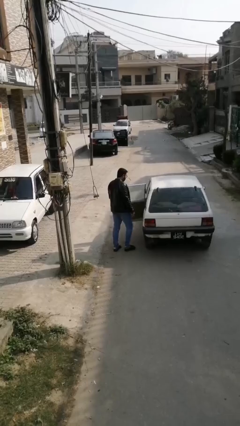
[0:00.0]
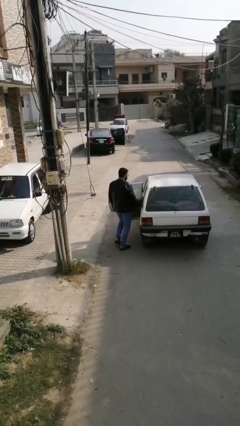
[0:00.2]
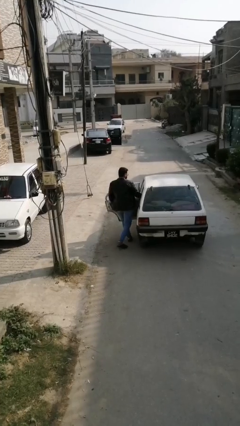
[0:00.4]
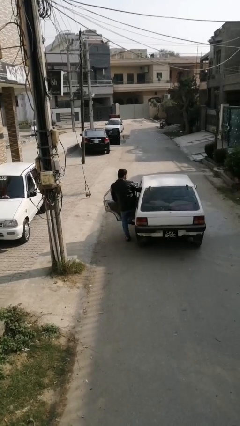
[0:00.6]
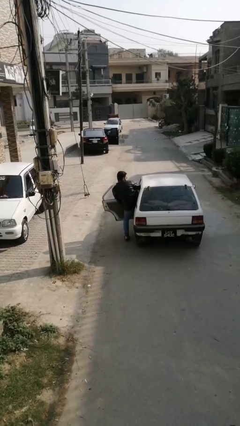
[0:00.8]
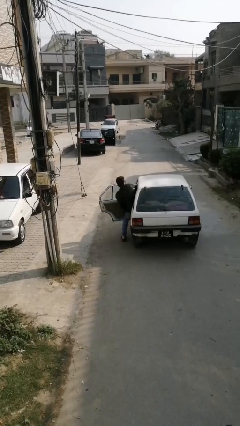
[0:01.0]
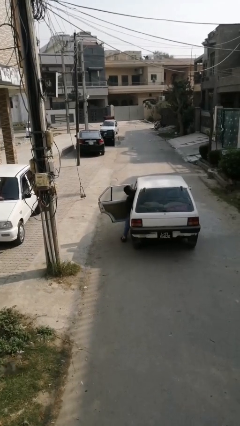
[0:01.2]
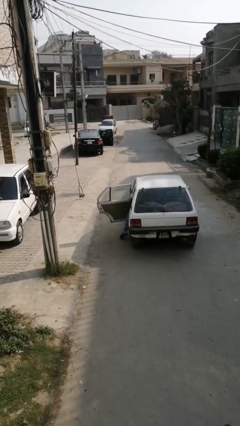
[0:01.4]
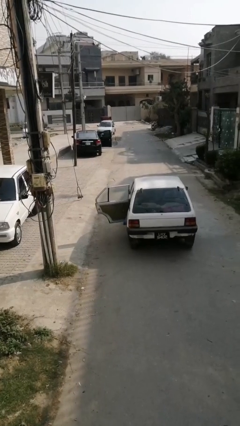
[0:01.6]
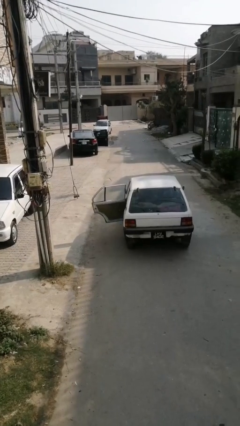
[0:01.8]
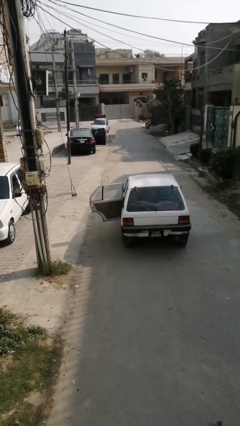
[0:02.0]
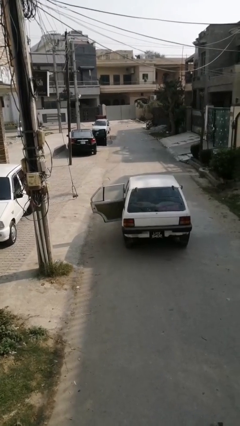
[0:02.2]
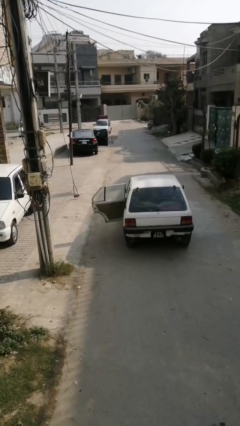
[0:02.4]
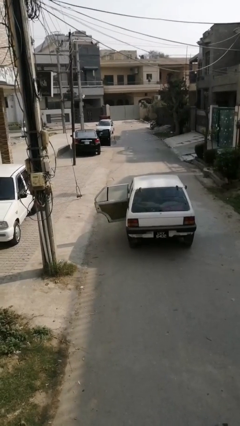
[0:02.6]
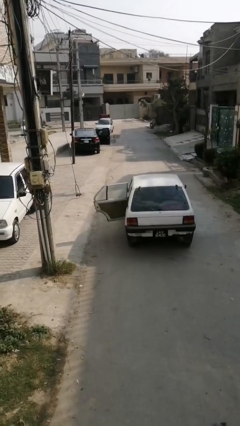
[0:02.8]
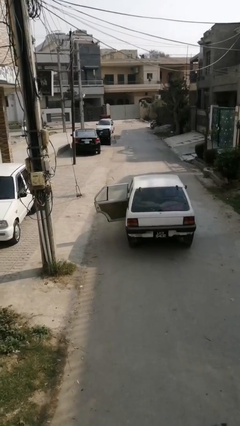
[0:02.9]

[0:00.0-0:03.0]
person enters car

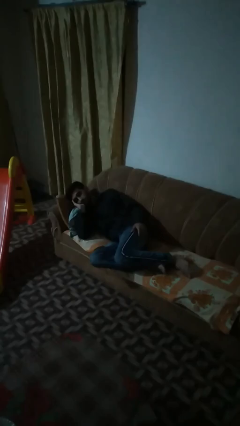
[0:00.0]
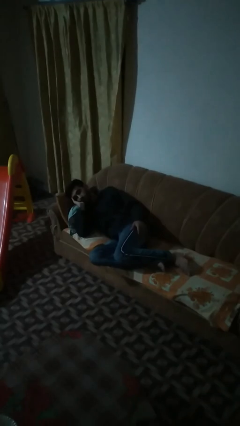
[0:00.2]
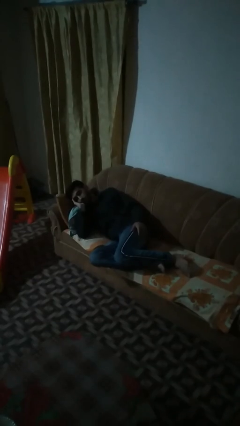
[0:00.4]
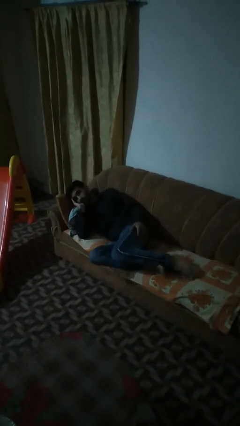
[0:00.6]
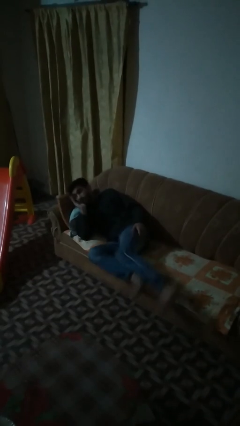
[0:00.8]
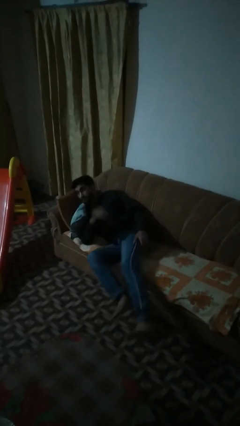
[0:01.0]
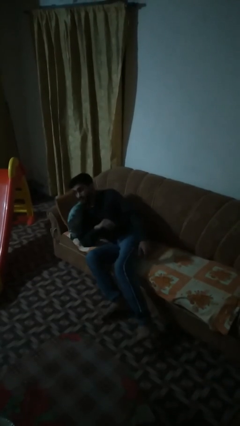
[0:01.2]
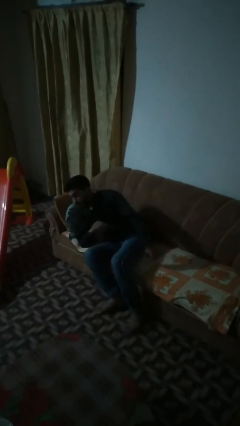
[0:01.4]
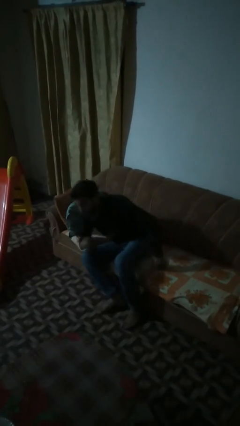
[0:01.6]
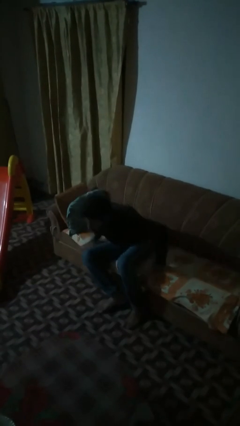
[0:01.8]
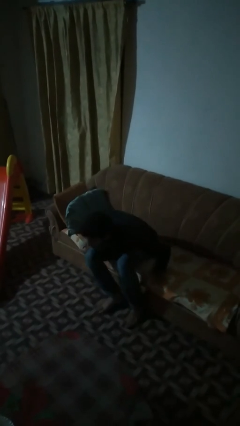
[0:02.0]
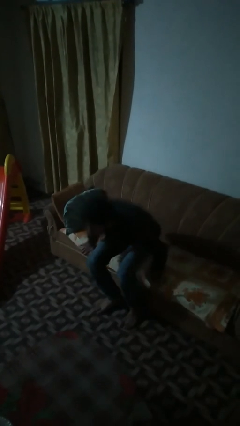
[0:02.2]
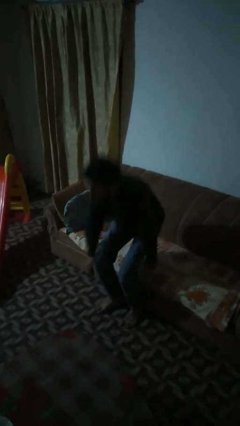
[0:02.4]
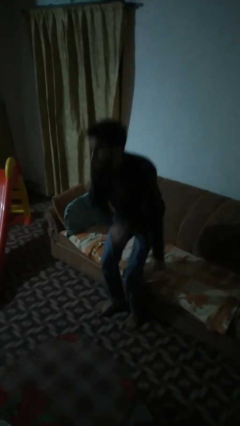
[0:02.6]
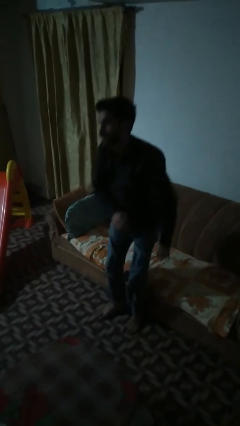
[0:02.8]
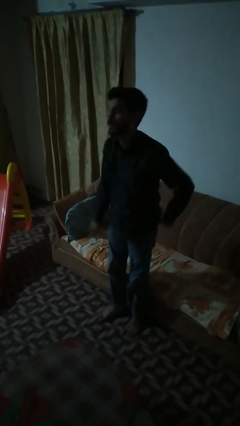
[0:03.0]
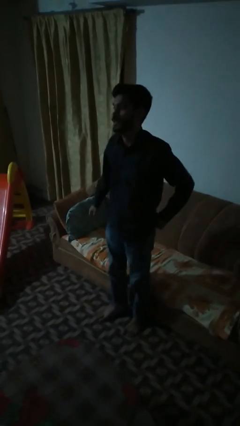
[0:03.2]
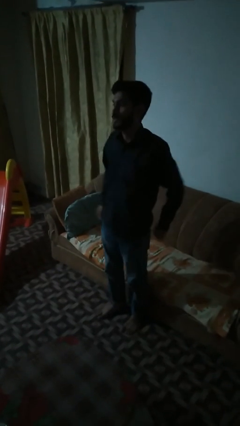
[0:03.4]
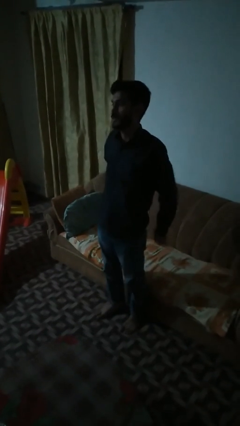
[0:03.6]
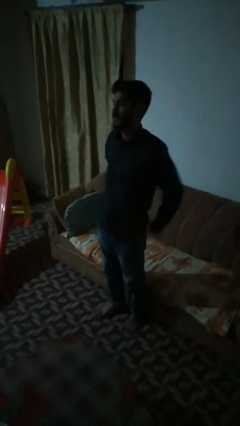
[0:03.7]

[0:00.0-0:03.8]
person stands up

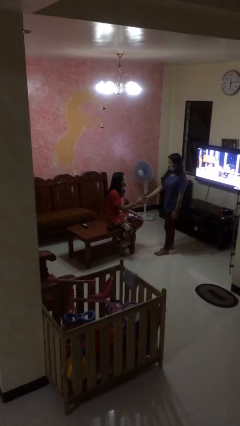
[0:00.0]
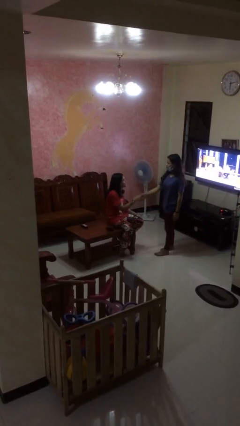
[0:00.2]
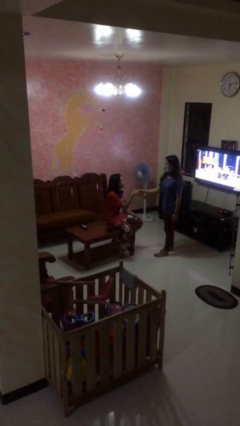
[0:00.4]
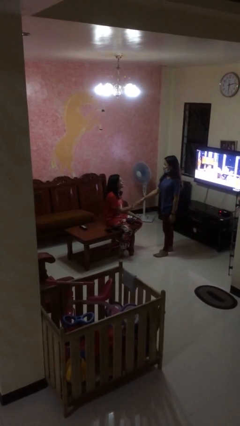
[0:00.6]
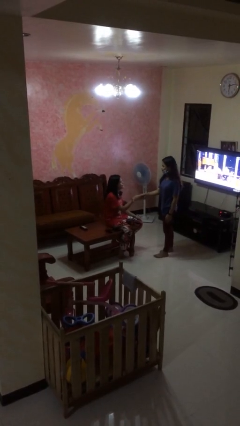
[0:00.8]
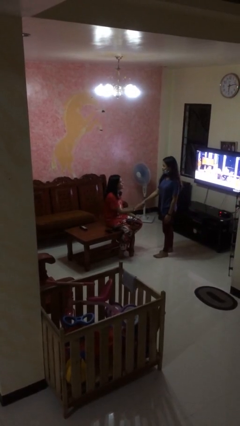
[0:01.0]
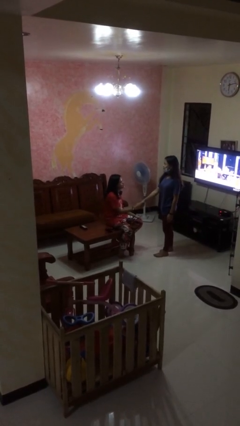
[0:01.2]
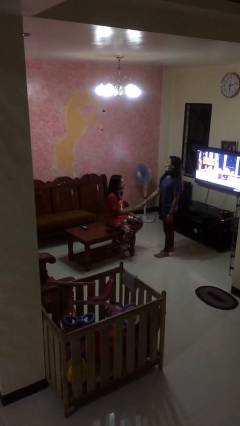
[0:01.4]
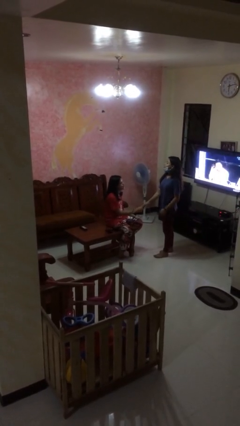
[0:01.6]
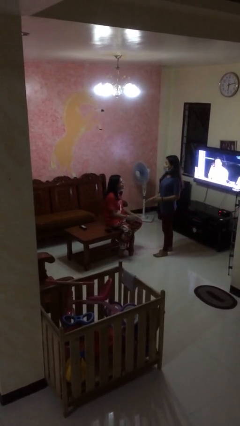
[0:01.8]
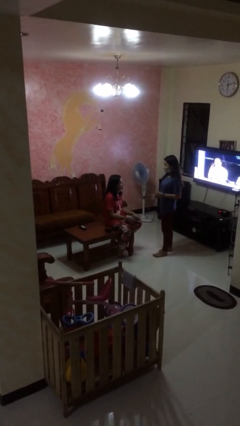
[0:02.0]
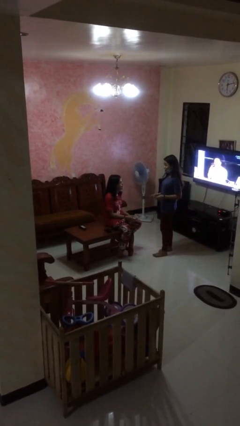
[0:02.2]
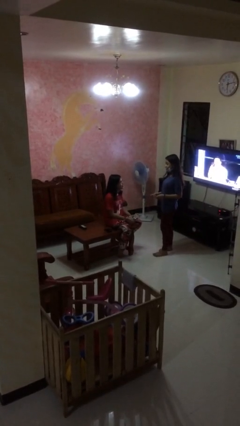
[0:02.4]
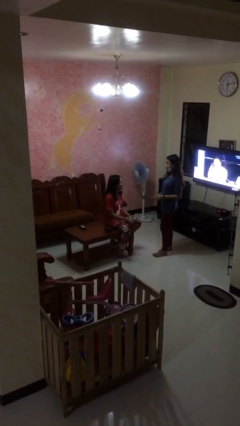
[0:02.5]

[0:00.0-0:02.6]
person shakes hand

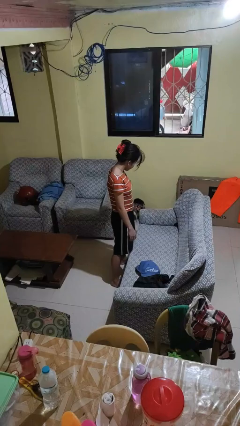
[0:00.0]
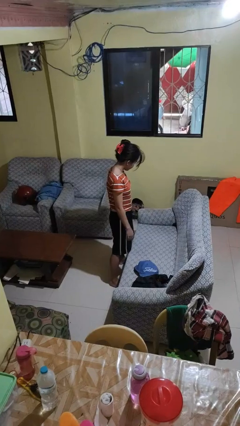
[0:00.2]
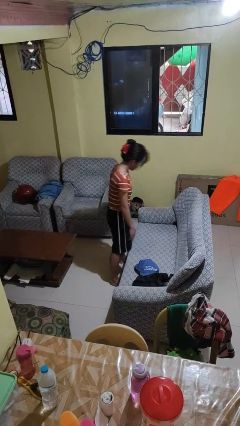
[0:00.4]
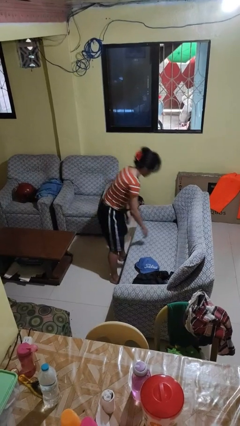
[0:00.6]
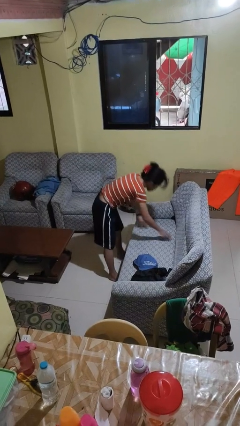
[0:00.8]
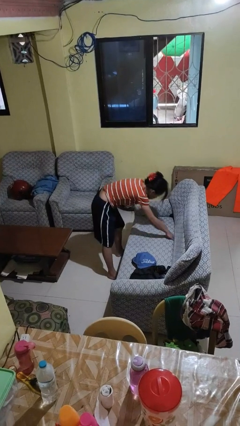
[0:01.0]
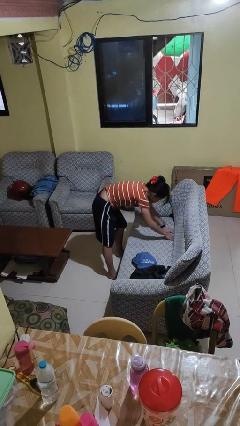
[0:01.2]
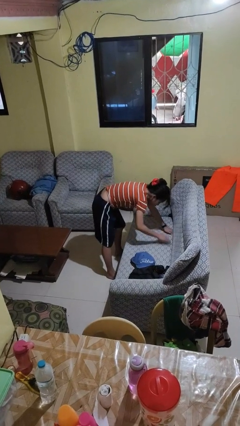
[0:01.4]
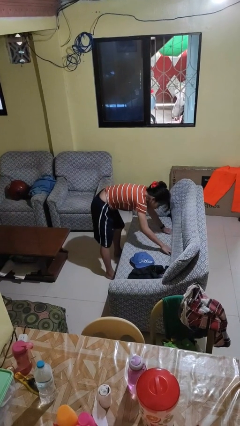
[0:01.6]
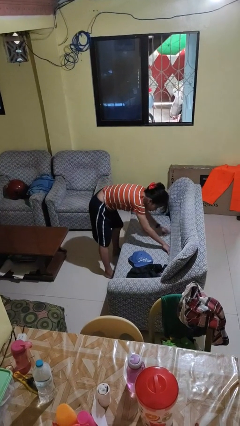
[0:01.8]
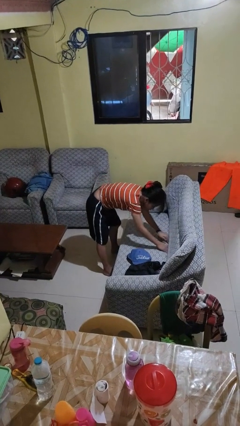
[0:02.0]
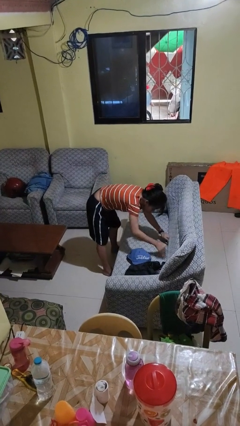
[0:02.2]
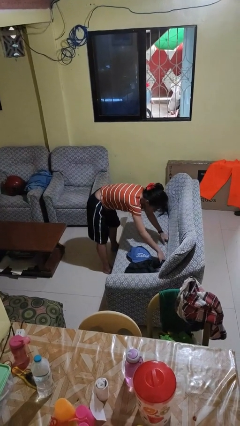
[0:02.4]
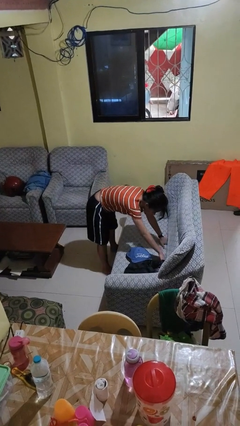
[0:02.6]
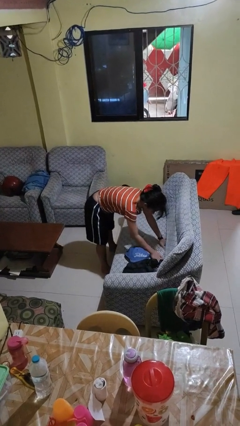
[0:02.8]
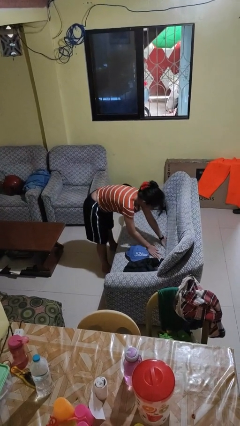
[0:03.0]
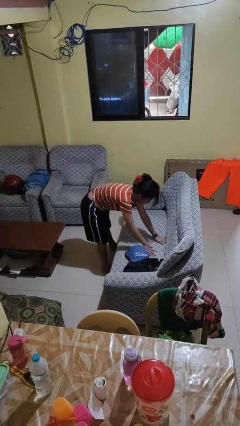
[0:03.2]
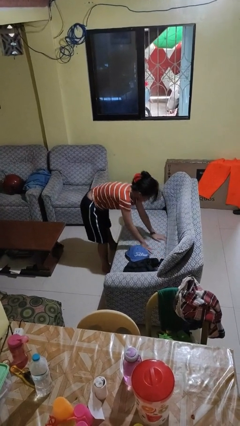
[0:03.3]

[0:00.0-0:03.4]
person searches in couch

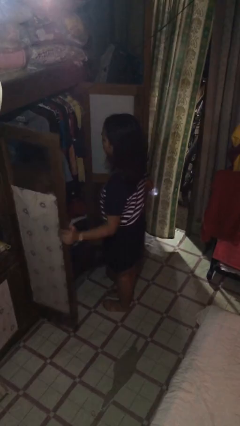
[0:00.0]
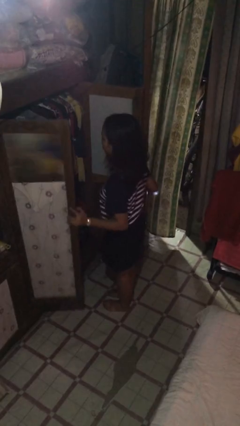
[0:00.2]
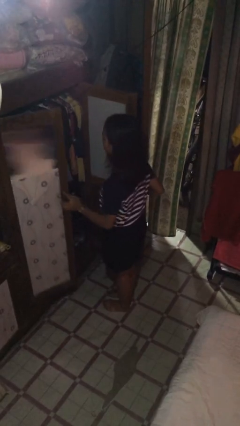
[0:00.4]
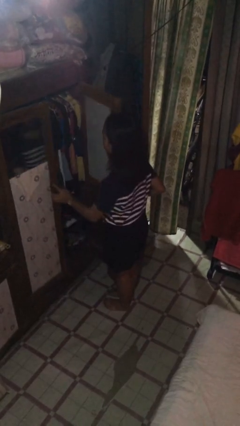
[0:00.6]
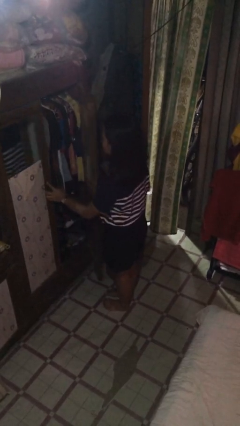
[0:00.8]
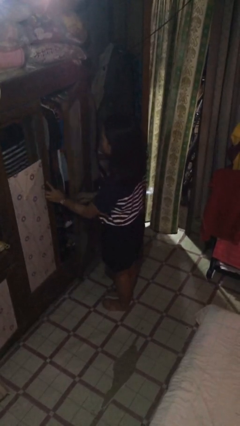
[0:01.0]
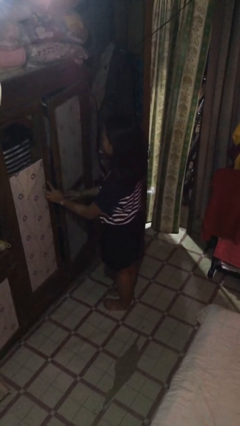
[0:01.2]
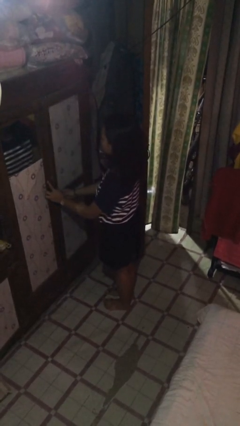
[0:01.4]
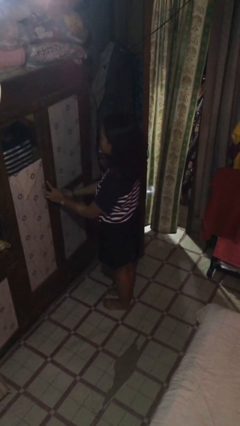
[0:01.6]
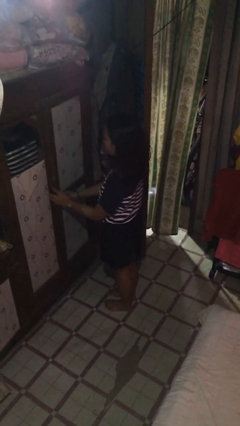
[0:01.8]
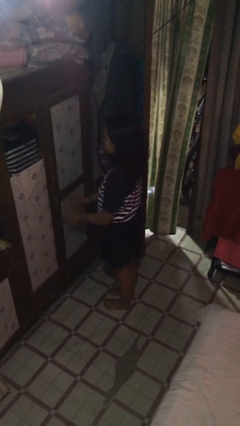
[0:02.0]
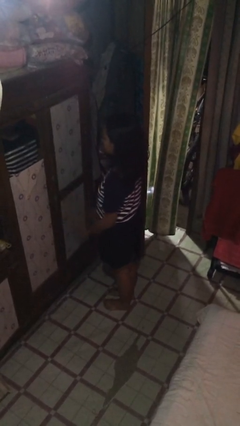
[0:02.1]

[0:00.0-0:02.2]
person closes closet door

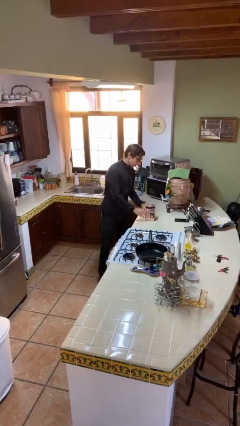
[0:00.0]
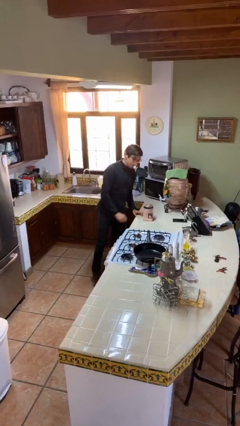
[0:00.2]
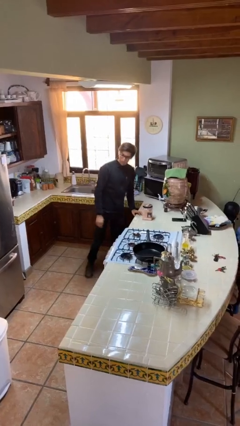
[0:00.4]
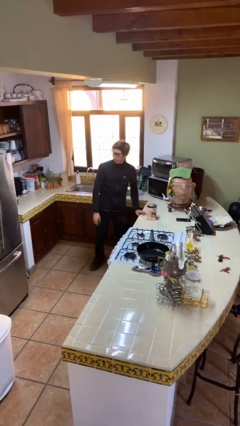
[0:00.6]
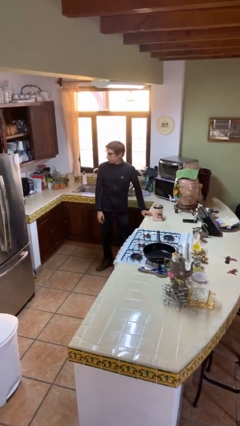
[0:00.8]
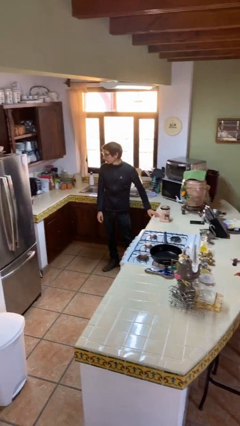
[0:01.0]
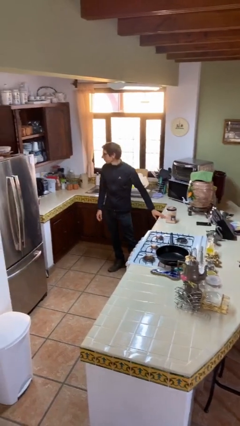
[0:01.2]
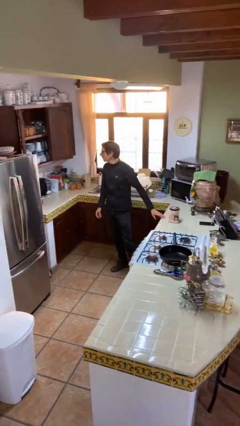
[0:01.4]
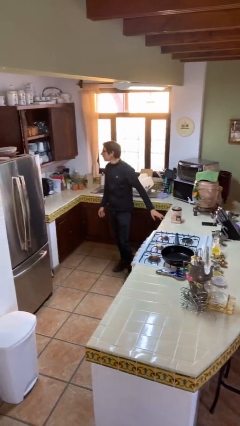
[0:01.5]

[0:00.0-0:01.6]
person puts down object on table

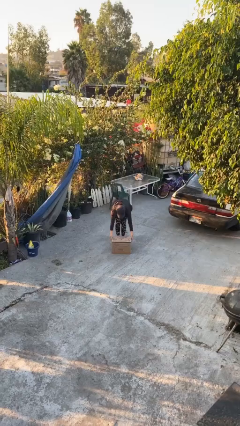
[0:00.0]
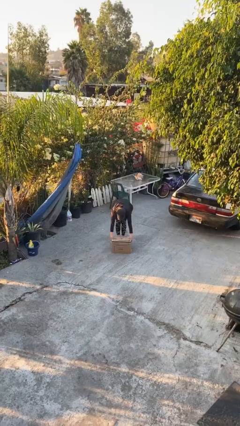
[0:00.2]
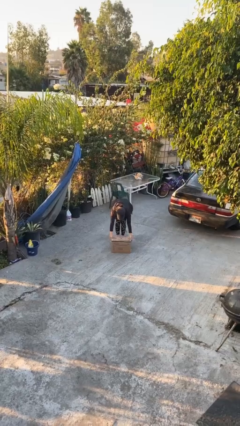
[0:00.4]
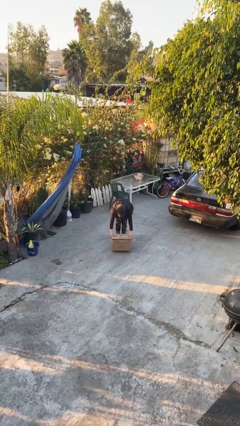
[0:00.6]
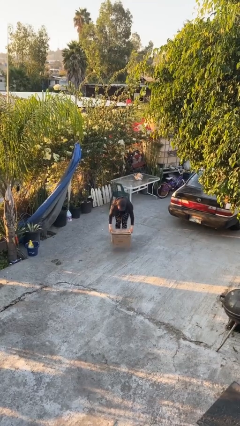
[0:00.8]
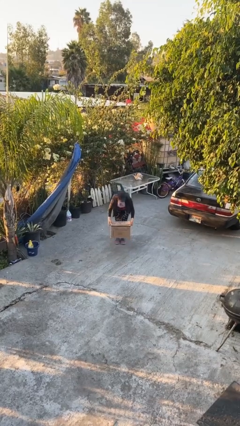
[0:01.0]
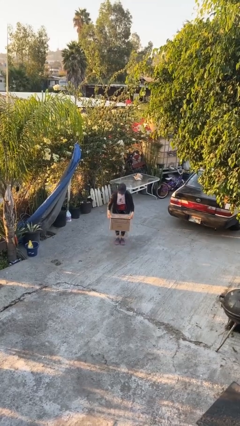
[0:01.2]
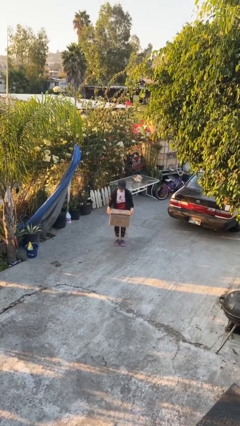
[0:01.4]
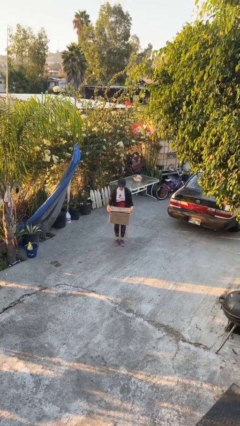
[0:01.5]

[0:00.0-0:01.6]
person picks up object from floor
